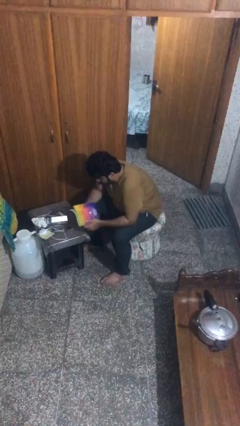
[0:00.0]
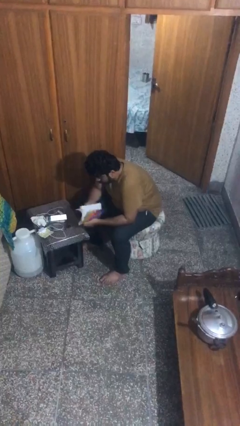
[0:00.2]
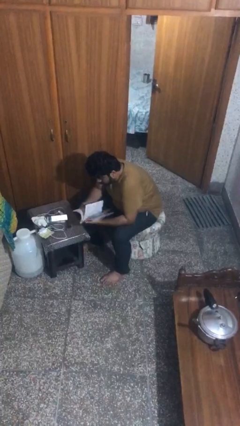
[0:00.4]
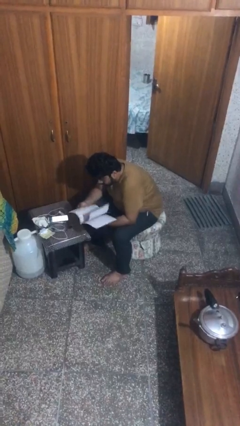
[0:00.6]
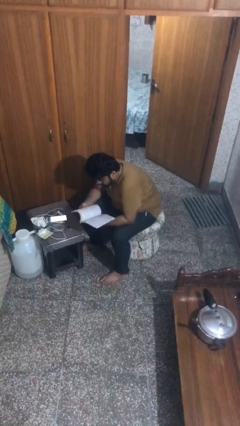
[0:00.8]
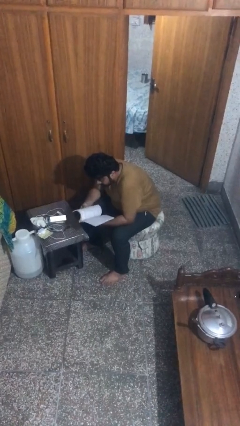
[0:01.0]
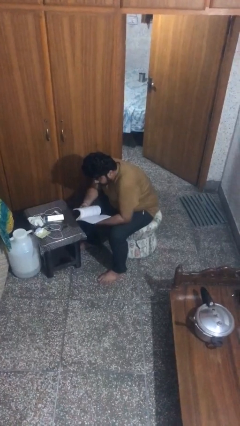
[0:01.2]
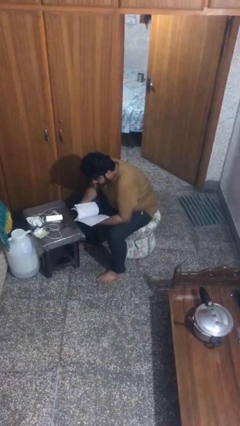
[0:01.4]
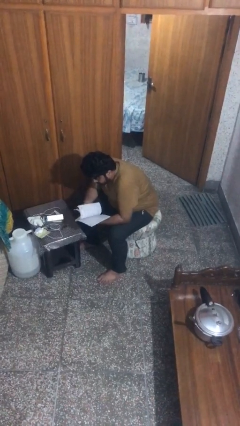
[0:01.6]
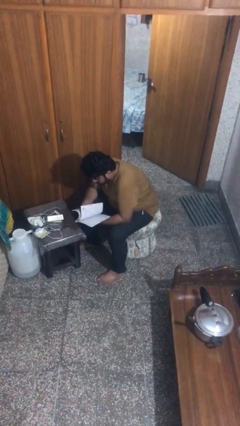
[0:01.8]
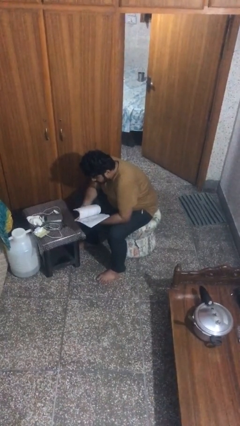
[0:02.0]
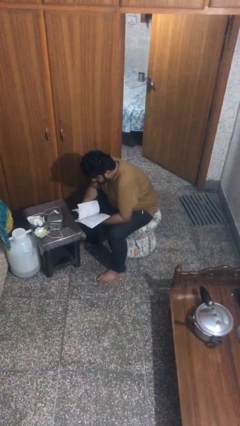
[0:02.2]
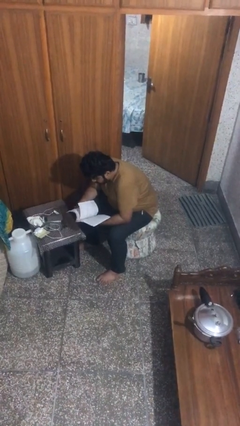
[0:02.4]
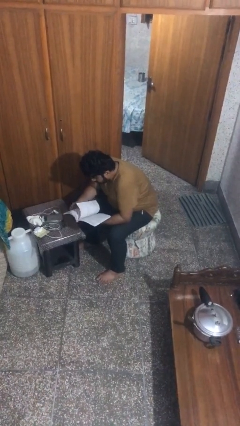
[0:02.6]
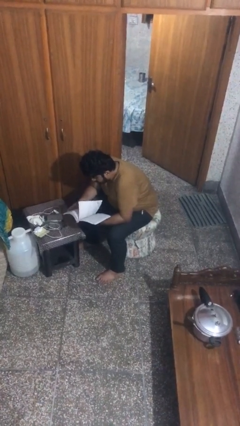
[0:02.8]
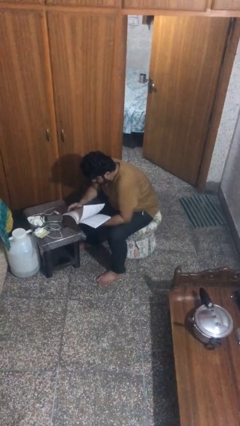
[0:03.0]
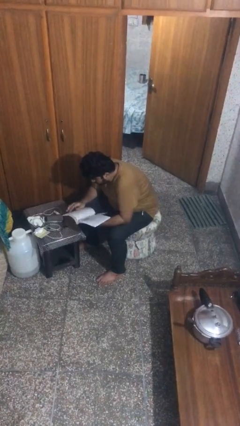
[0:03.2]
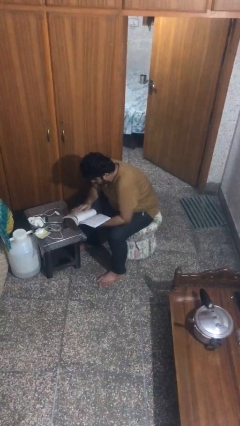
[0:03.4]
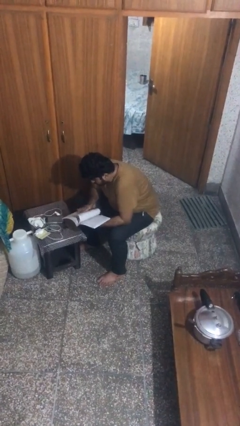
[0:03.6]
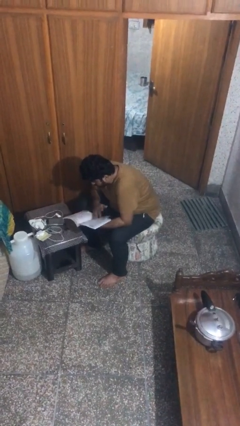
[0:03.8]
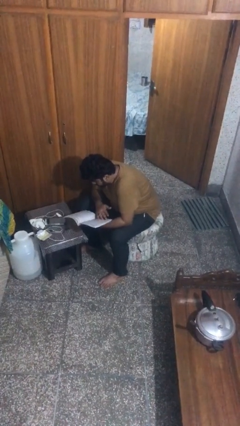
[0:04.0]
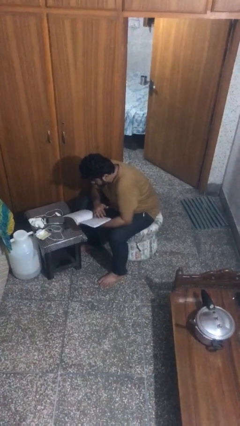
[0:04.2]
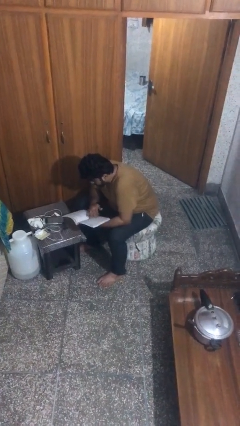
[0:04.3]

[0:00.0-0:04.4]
person reads document

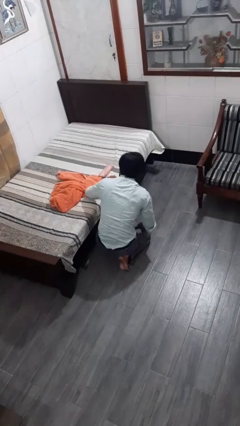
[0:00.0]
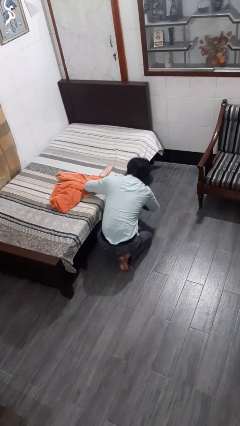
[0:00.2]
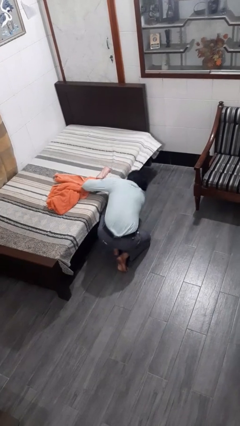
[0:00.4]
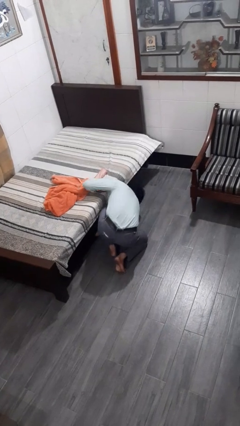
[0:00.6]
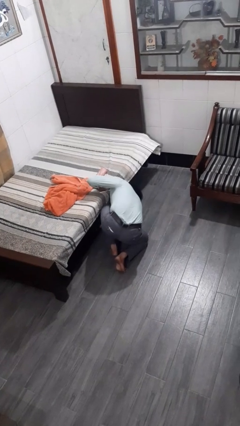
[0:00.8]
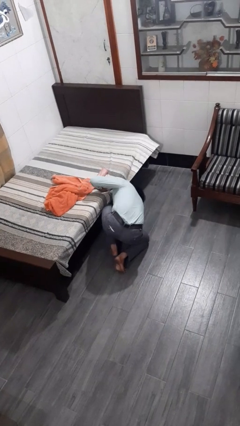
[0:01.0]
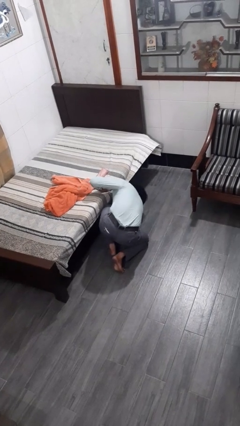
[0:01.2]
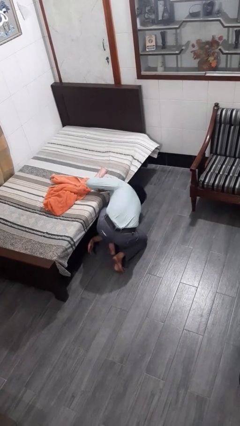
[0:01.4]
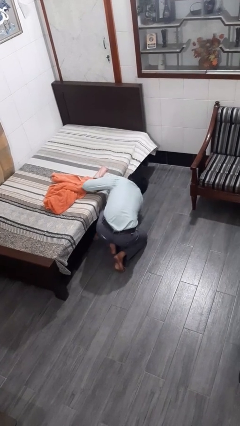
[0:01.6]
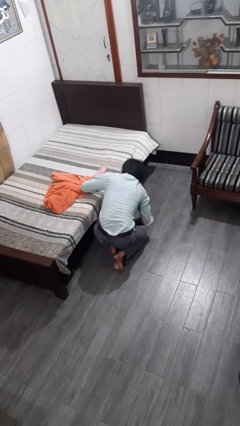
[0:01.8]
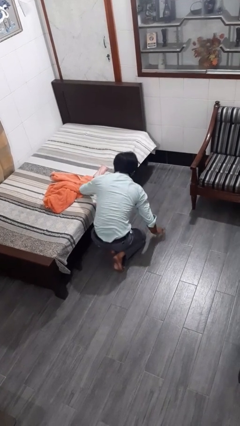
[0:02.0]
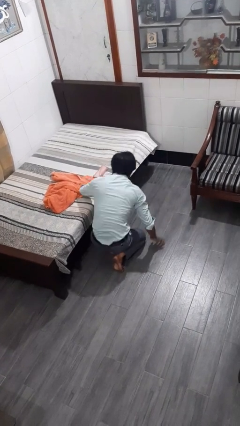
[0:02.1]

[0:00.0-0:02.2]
person searches under bed

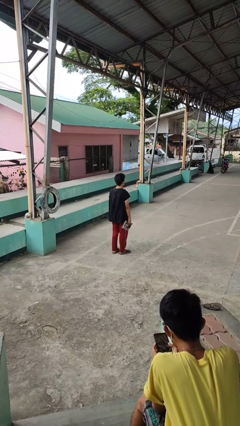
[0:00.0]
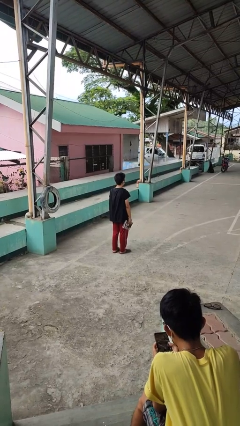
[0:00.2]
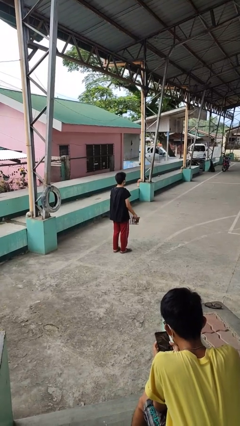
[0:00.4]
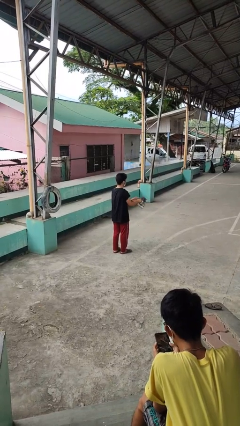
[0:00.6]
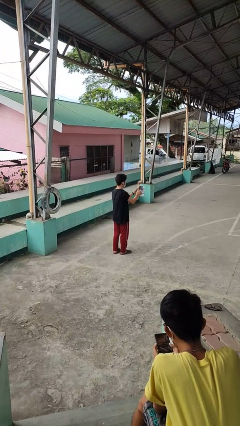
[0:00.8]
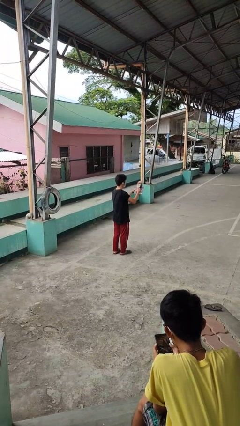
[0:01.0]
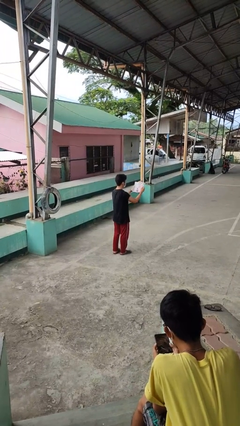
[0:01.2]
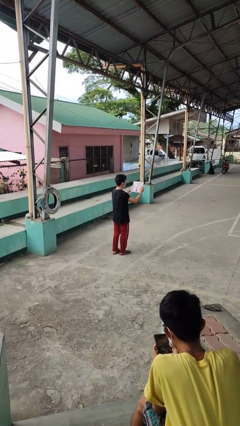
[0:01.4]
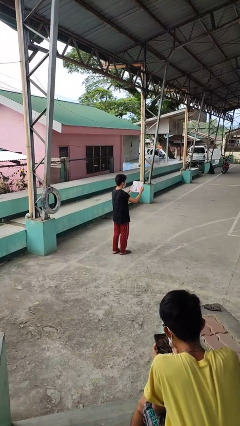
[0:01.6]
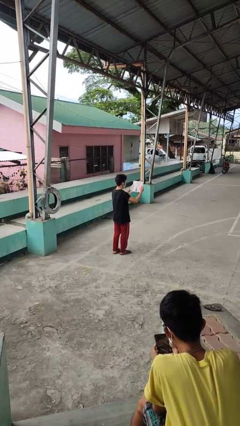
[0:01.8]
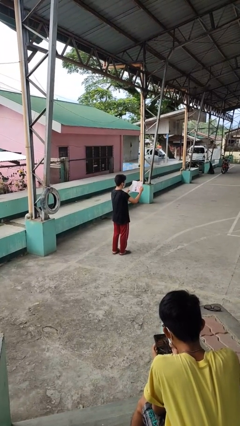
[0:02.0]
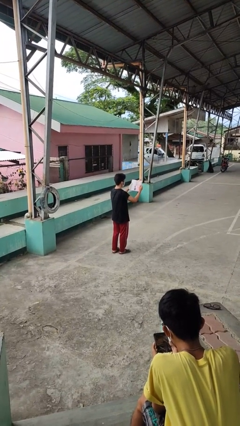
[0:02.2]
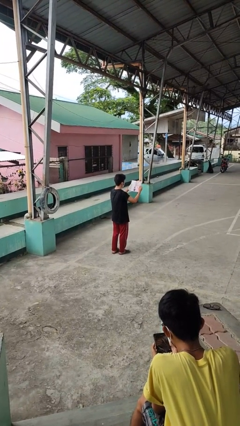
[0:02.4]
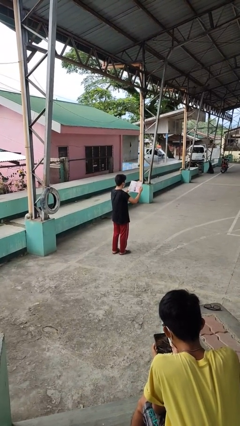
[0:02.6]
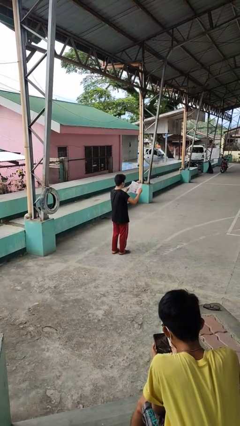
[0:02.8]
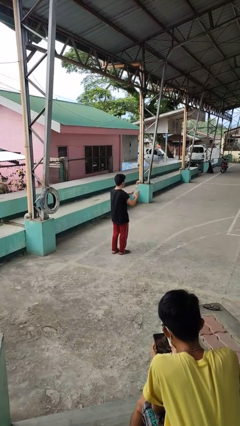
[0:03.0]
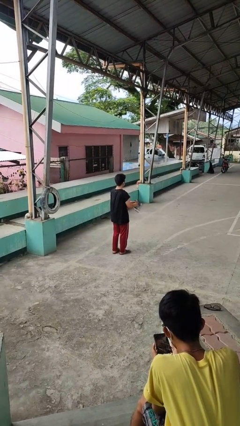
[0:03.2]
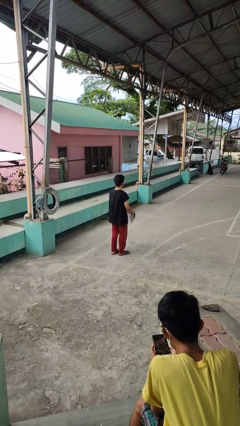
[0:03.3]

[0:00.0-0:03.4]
person reads magazine

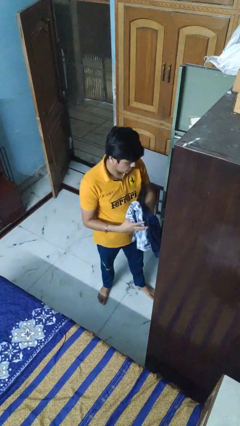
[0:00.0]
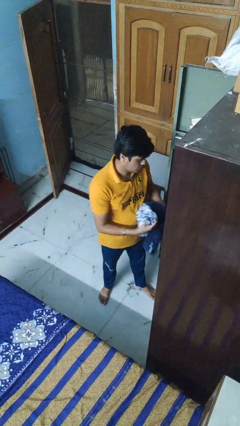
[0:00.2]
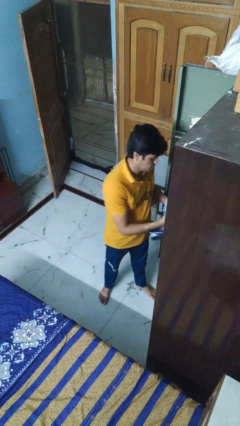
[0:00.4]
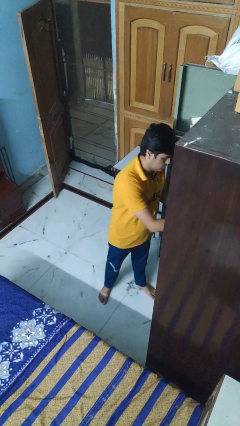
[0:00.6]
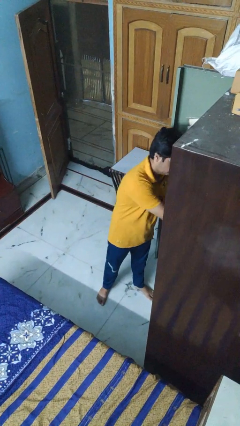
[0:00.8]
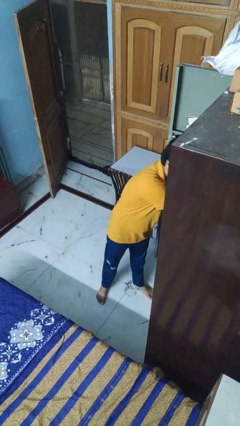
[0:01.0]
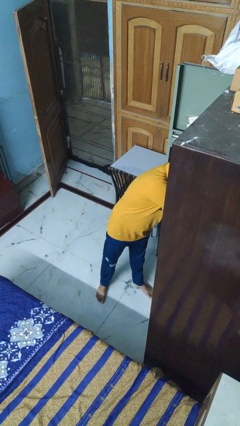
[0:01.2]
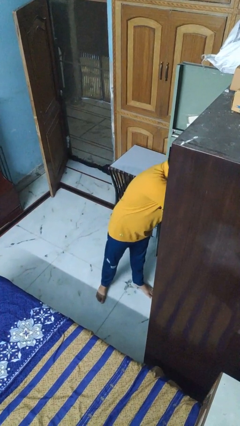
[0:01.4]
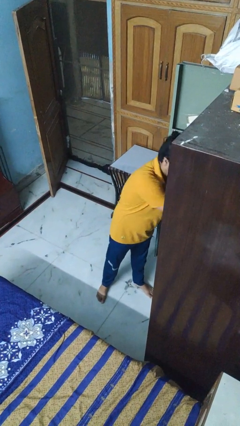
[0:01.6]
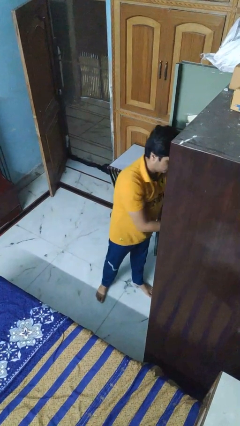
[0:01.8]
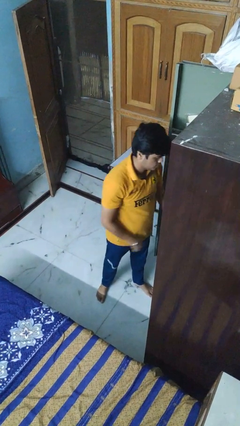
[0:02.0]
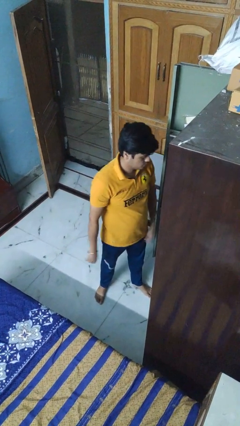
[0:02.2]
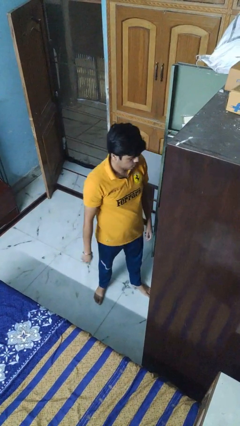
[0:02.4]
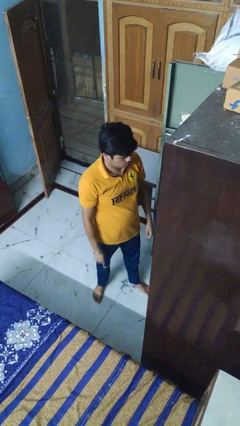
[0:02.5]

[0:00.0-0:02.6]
person puts clothes into dresser

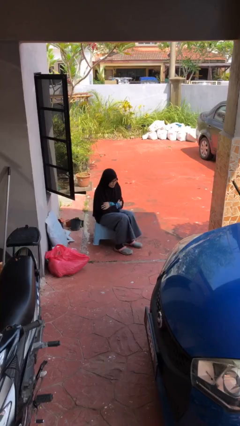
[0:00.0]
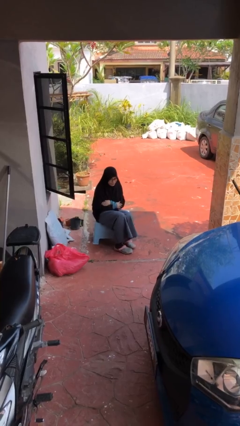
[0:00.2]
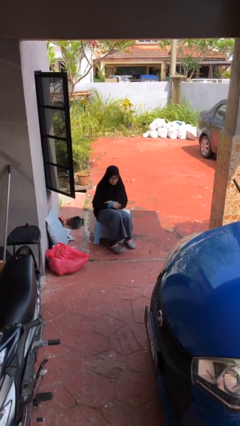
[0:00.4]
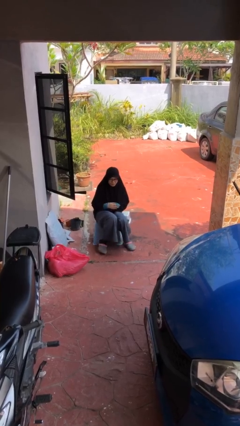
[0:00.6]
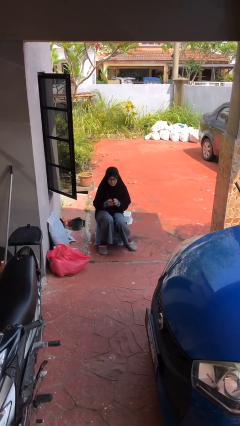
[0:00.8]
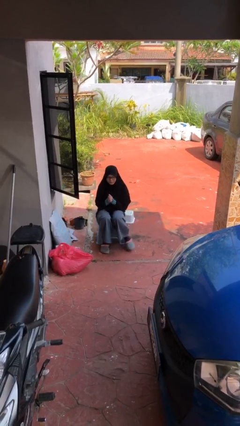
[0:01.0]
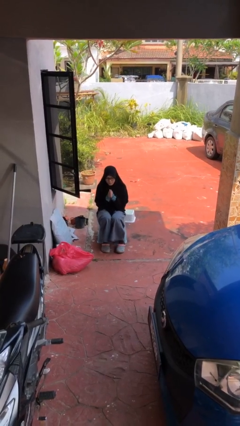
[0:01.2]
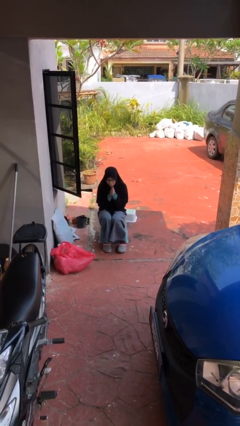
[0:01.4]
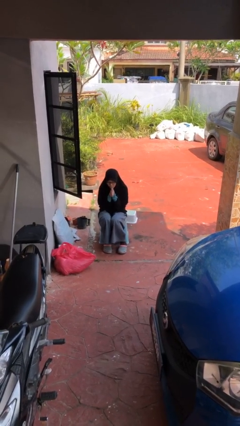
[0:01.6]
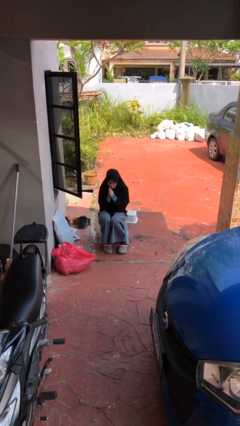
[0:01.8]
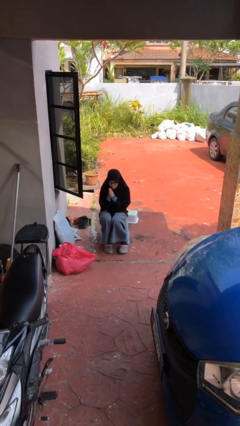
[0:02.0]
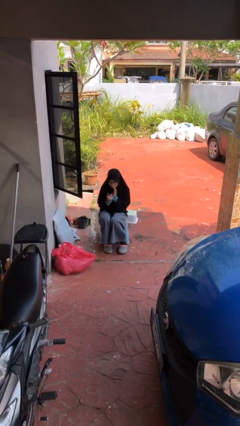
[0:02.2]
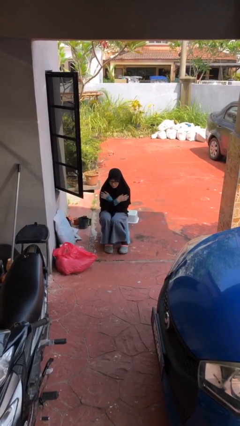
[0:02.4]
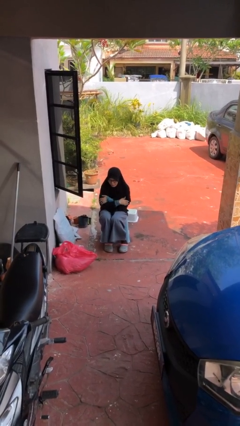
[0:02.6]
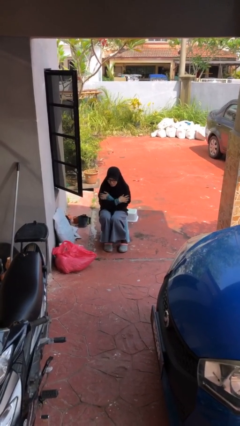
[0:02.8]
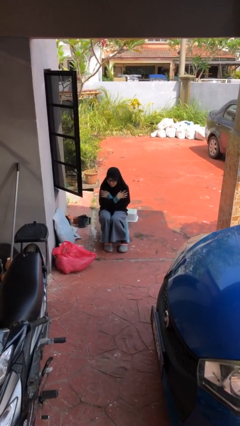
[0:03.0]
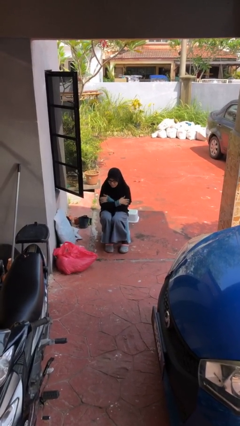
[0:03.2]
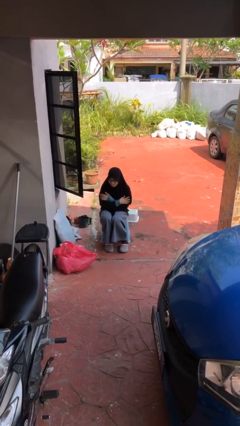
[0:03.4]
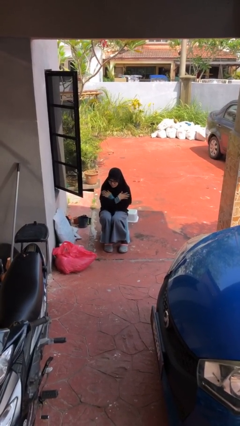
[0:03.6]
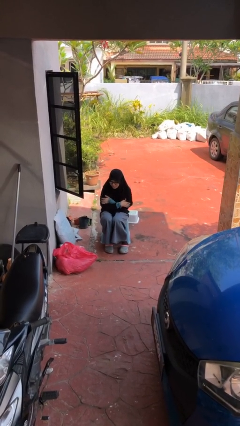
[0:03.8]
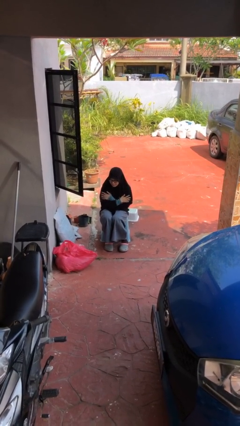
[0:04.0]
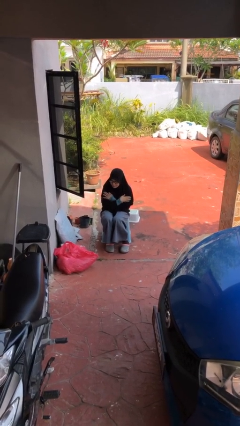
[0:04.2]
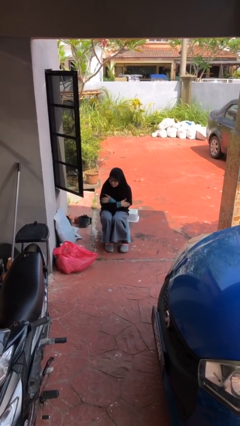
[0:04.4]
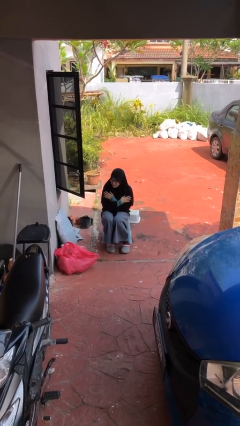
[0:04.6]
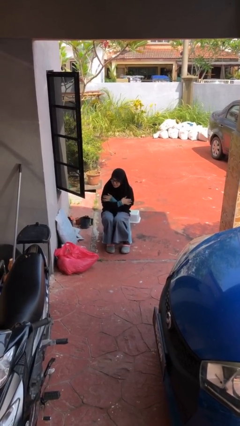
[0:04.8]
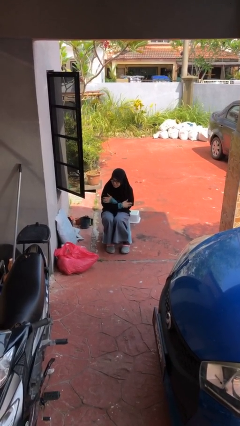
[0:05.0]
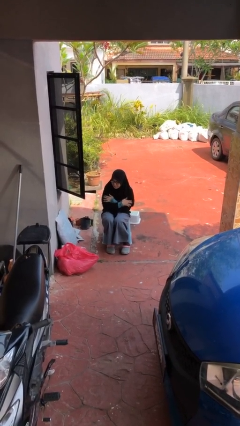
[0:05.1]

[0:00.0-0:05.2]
person blows into hands
